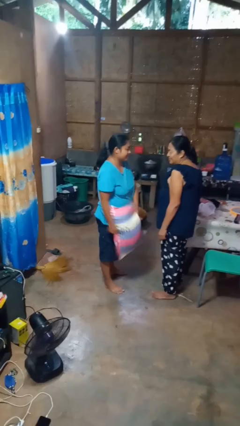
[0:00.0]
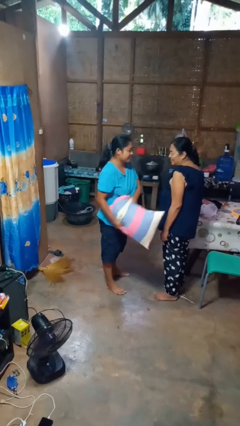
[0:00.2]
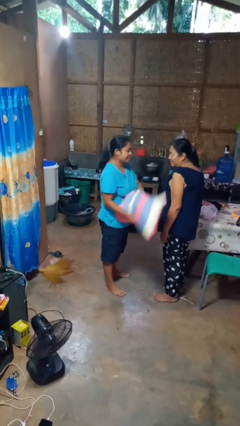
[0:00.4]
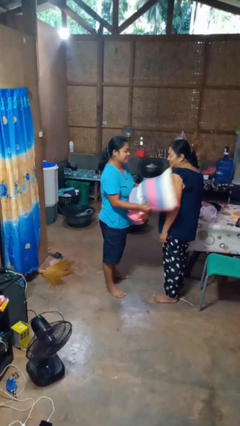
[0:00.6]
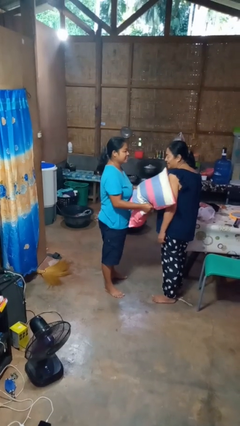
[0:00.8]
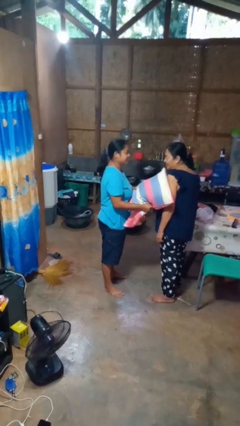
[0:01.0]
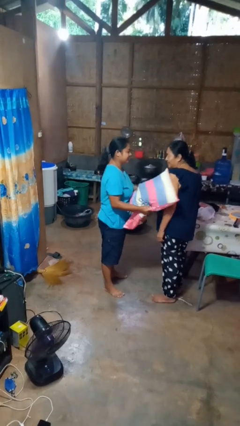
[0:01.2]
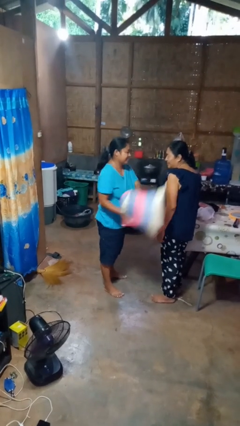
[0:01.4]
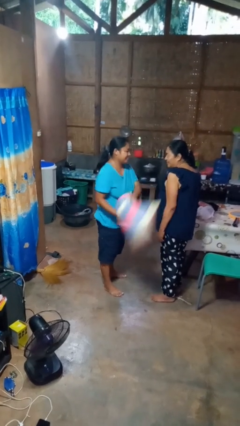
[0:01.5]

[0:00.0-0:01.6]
person hits person with pillow

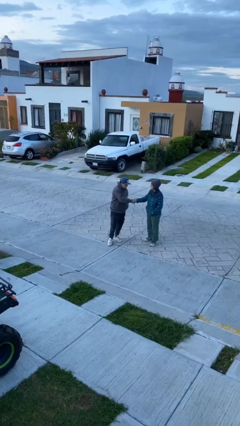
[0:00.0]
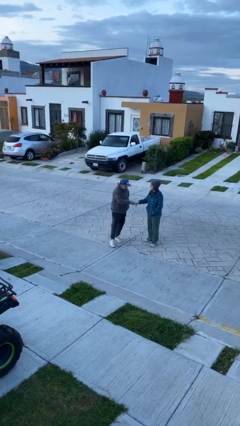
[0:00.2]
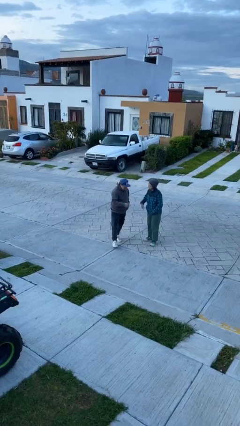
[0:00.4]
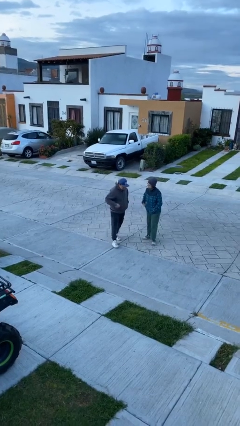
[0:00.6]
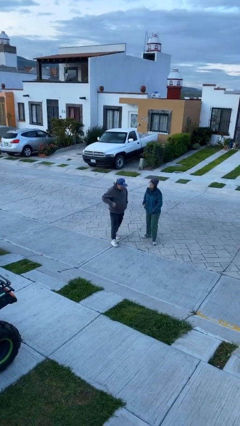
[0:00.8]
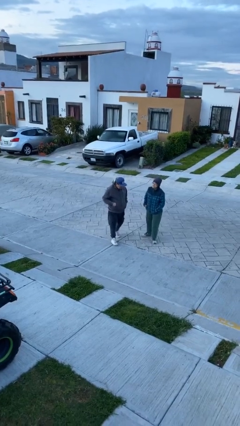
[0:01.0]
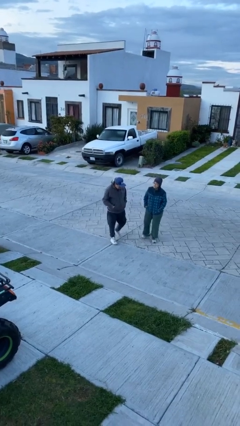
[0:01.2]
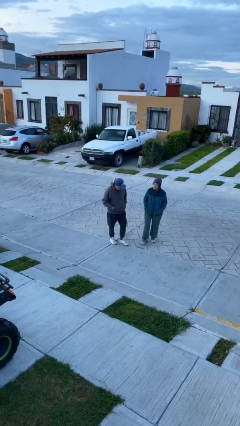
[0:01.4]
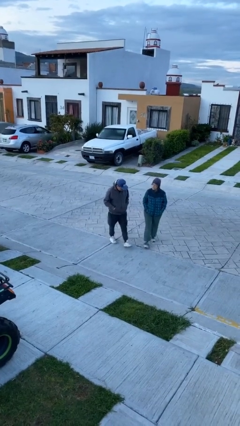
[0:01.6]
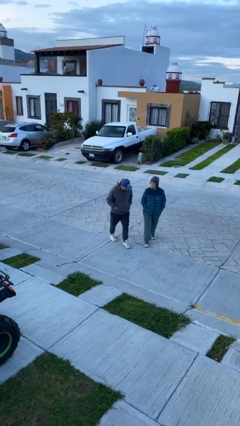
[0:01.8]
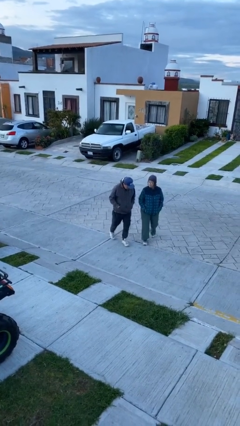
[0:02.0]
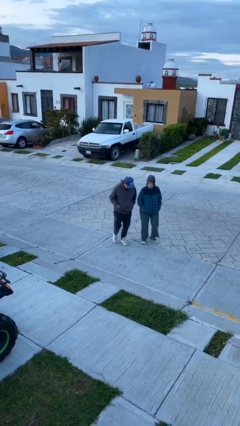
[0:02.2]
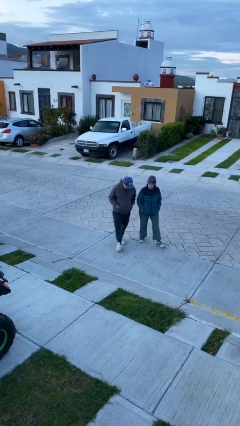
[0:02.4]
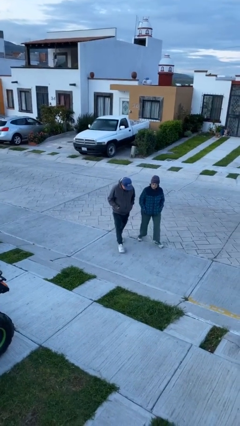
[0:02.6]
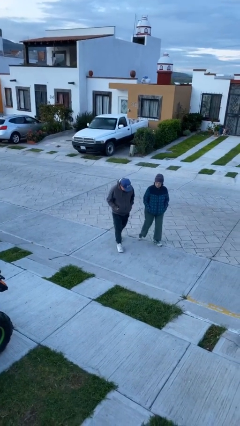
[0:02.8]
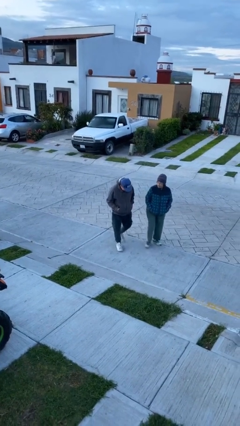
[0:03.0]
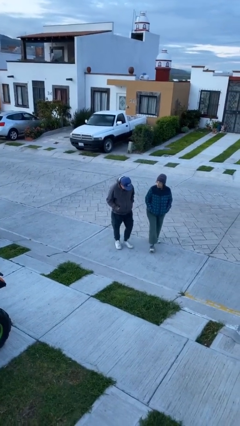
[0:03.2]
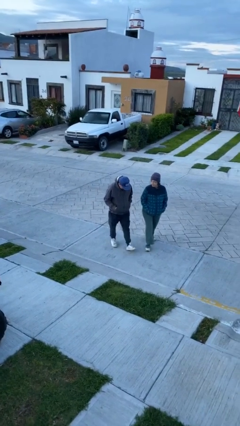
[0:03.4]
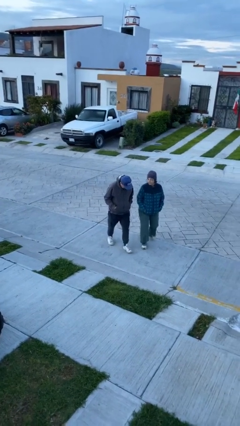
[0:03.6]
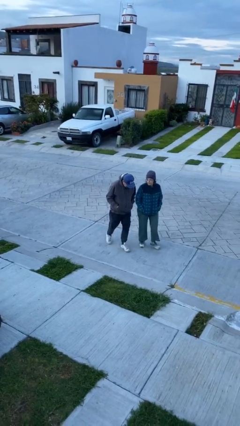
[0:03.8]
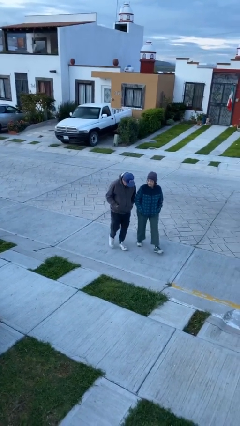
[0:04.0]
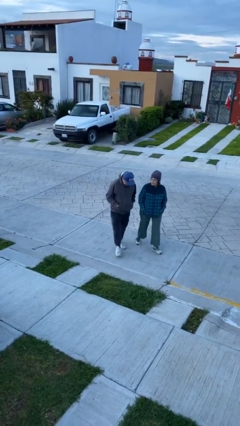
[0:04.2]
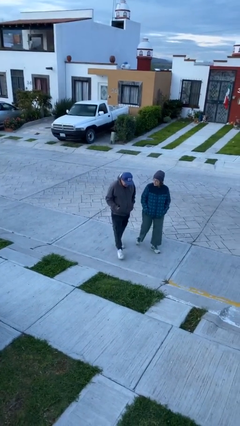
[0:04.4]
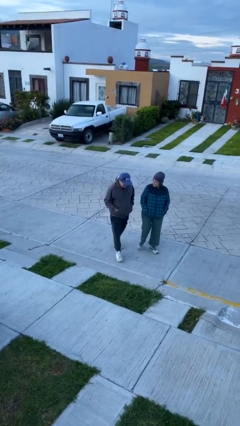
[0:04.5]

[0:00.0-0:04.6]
person talks to person

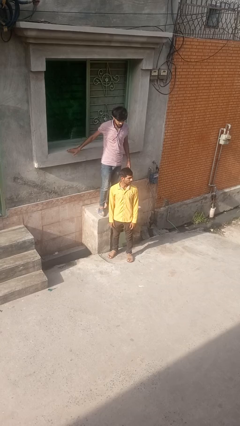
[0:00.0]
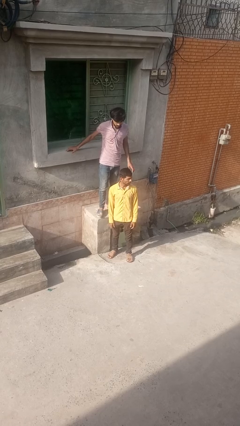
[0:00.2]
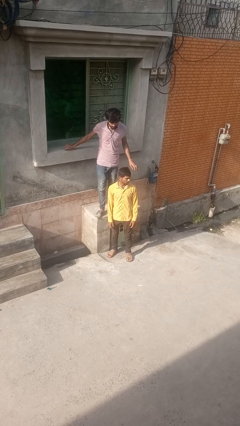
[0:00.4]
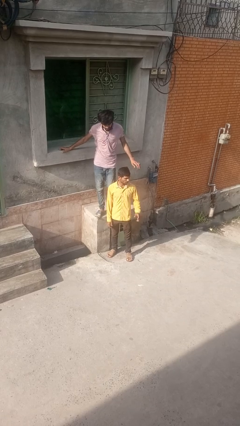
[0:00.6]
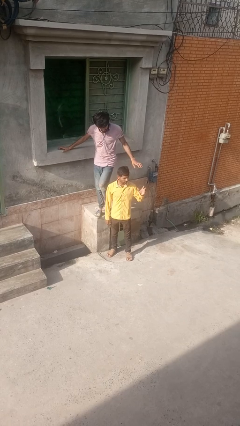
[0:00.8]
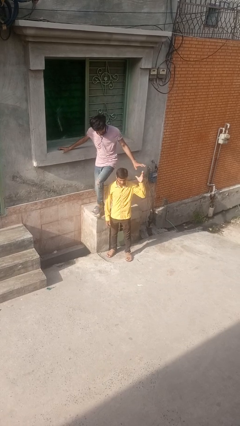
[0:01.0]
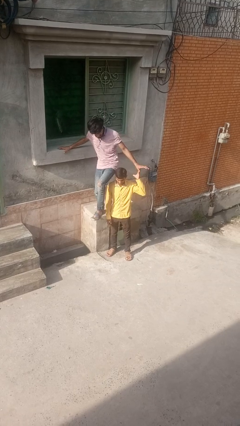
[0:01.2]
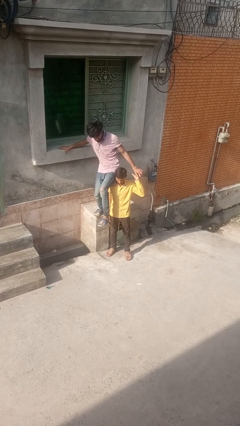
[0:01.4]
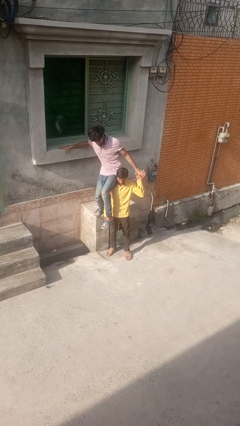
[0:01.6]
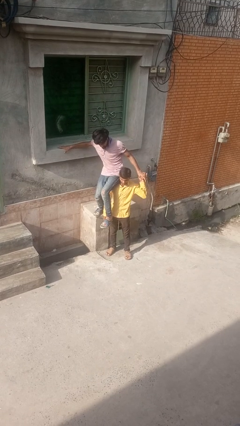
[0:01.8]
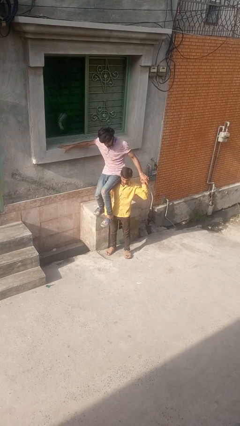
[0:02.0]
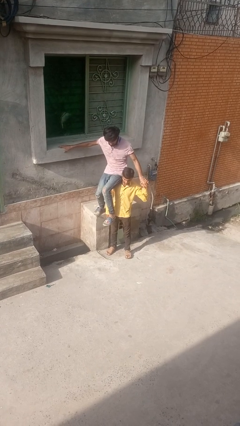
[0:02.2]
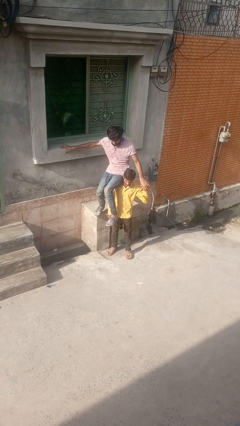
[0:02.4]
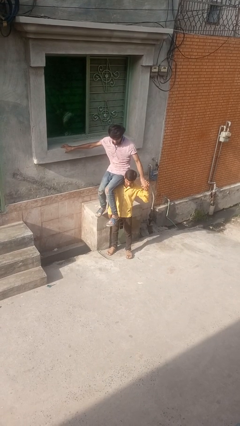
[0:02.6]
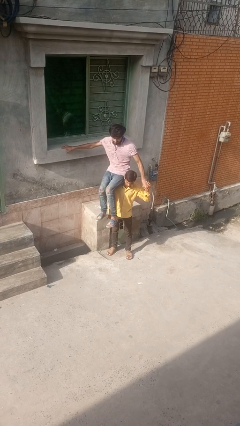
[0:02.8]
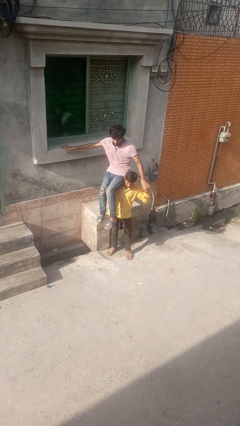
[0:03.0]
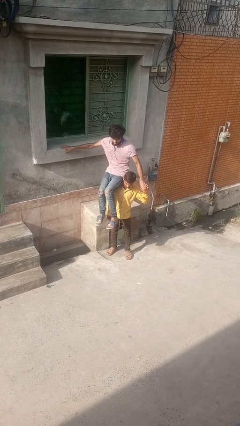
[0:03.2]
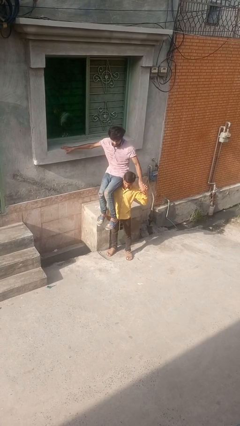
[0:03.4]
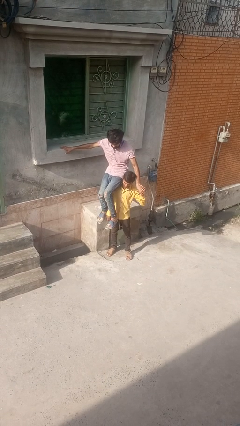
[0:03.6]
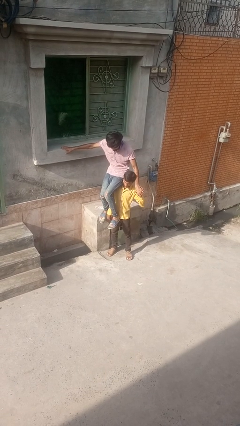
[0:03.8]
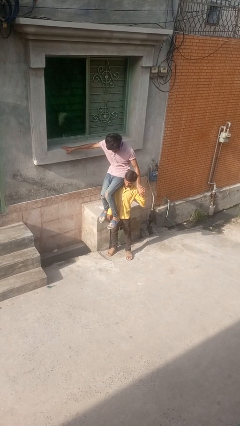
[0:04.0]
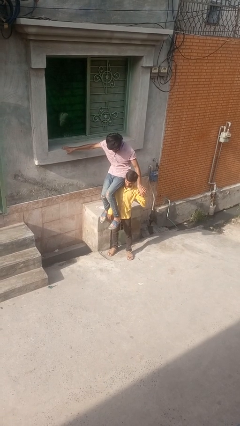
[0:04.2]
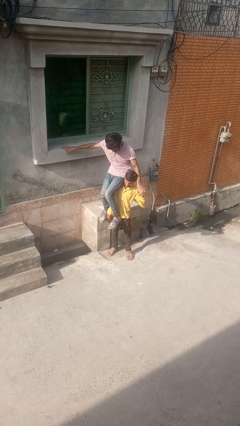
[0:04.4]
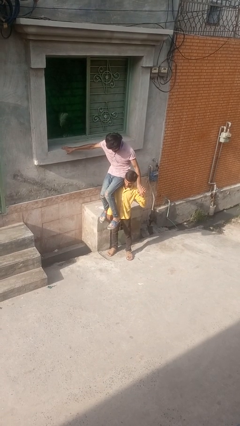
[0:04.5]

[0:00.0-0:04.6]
person carries person over shoulder

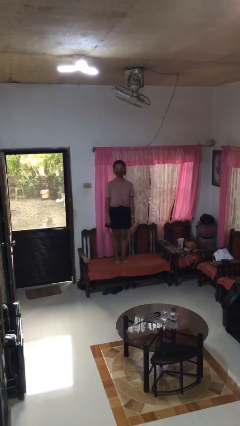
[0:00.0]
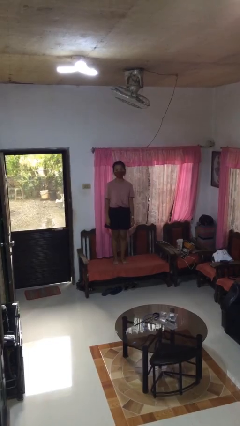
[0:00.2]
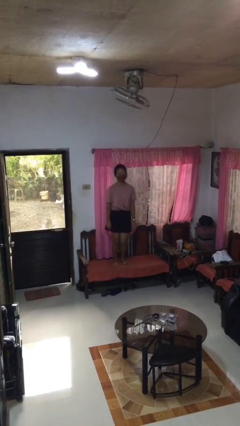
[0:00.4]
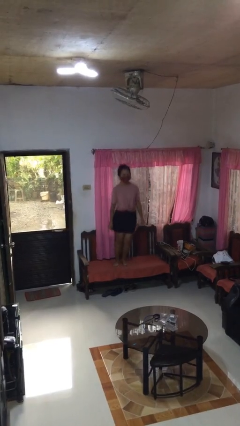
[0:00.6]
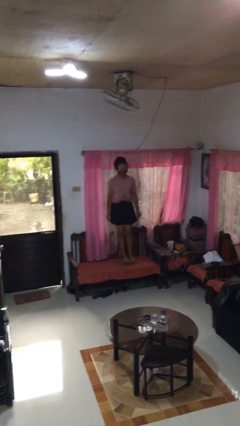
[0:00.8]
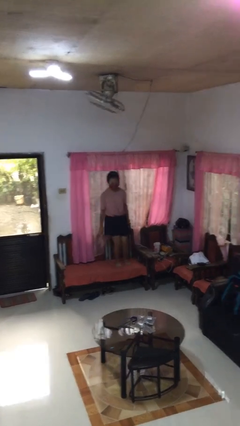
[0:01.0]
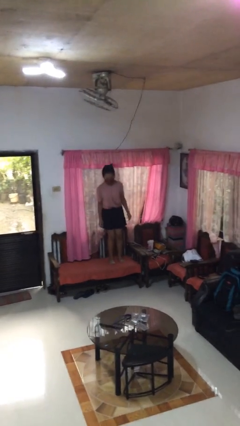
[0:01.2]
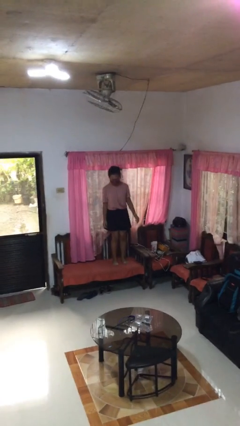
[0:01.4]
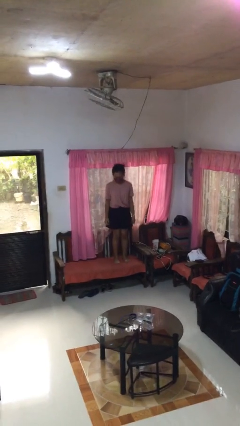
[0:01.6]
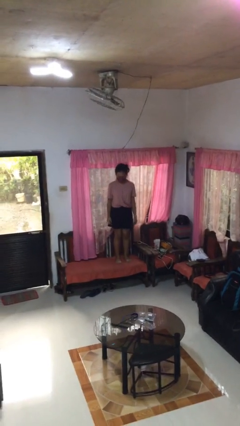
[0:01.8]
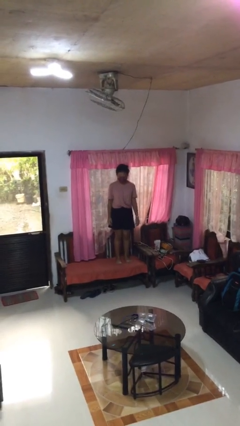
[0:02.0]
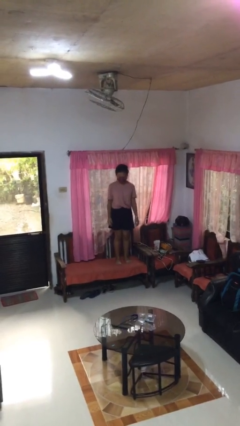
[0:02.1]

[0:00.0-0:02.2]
person jumps on couch

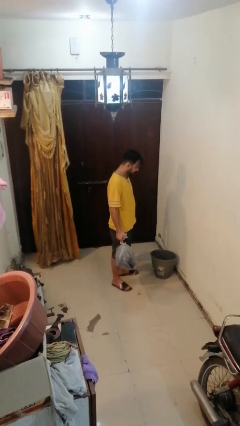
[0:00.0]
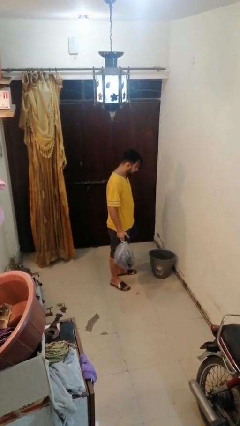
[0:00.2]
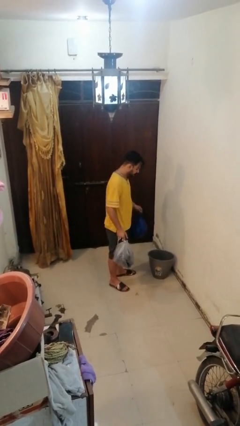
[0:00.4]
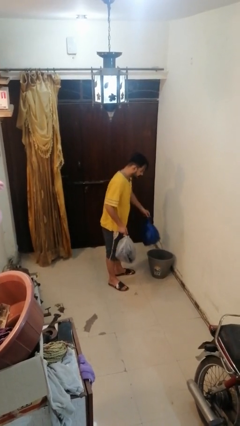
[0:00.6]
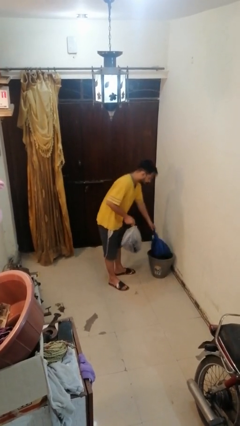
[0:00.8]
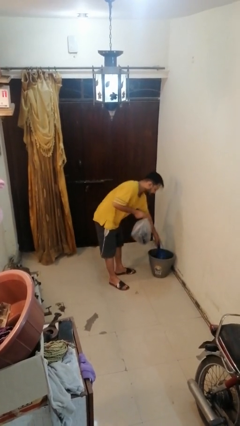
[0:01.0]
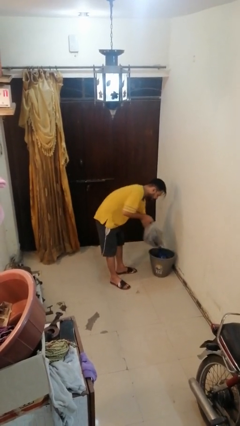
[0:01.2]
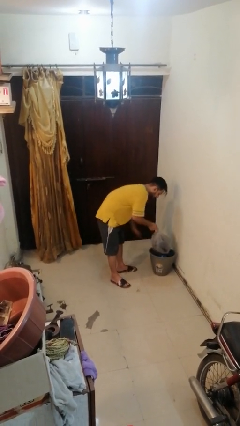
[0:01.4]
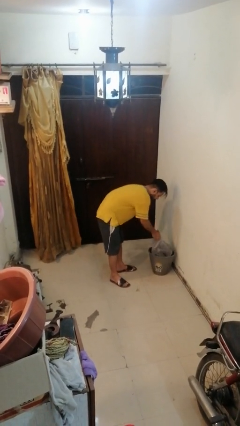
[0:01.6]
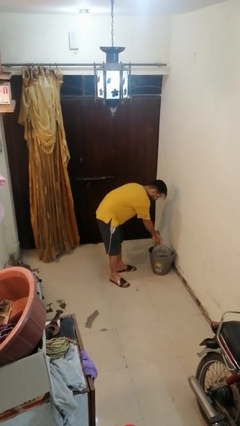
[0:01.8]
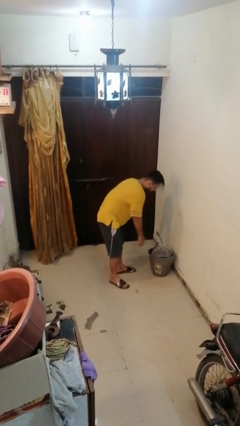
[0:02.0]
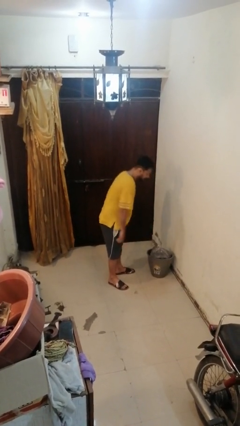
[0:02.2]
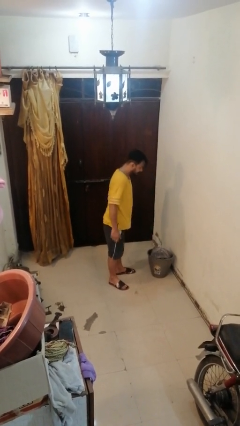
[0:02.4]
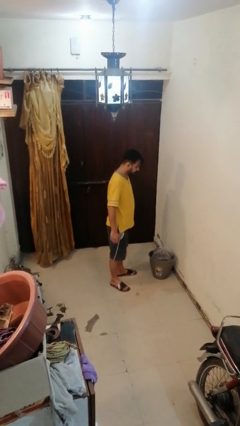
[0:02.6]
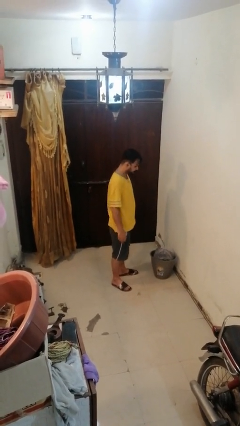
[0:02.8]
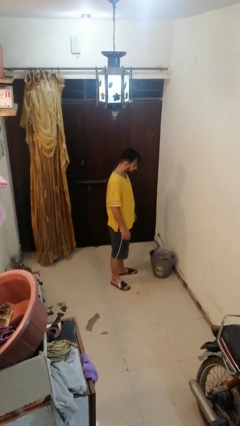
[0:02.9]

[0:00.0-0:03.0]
person discards trash

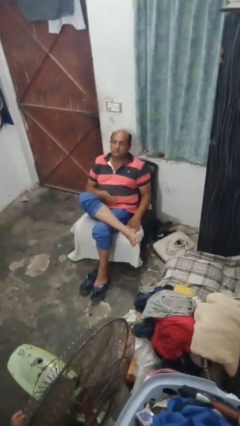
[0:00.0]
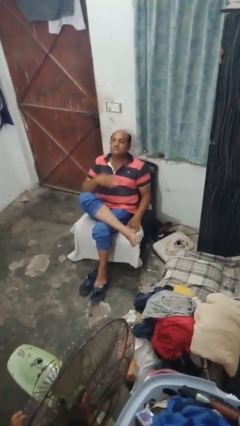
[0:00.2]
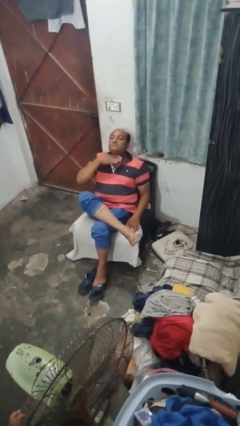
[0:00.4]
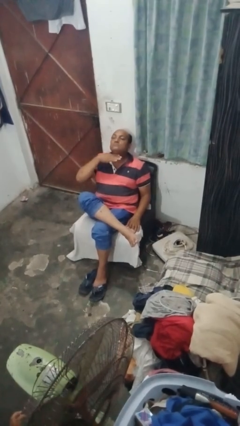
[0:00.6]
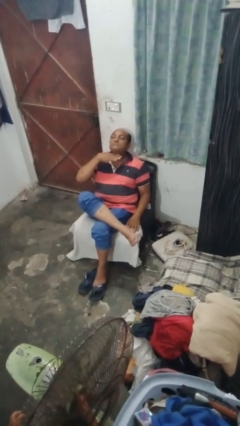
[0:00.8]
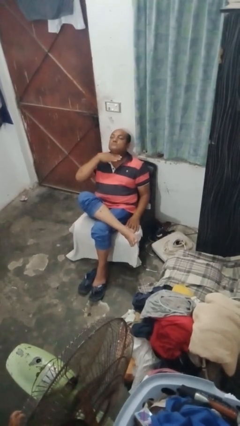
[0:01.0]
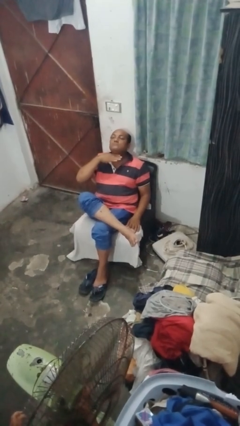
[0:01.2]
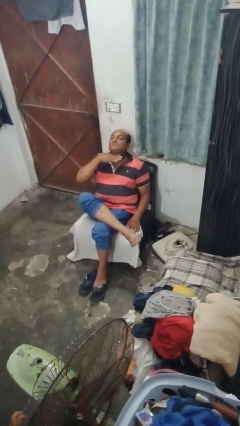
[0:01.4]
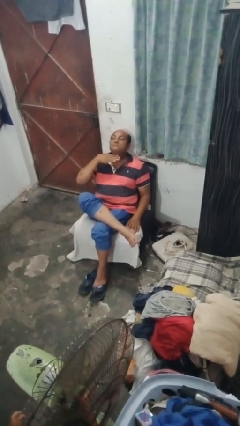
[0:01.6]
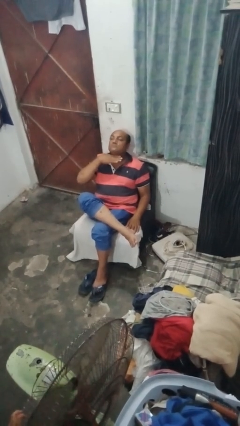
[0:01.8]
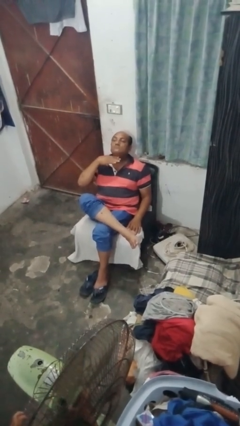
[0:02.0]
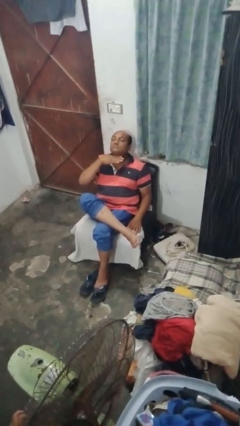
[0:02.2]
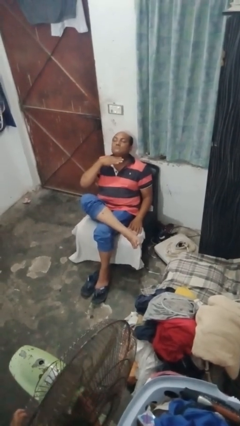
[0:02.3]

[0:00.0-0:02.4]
person gestures cut
